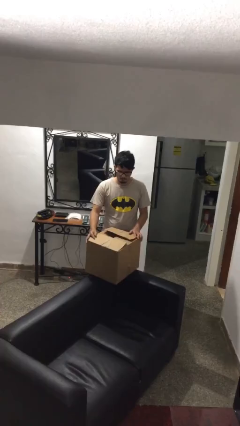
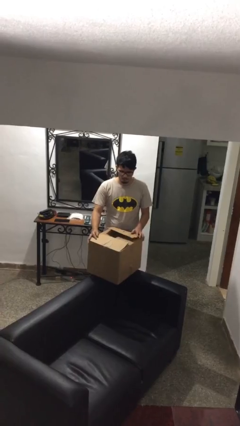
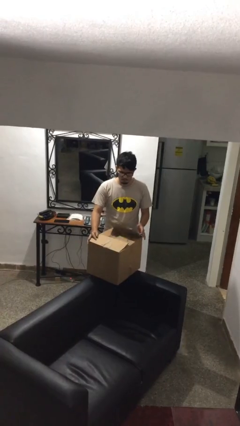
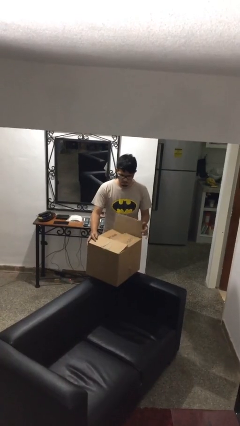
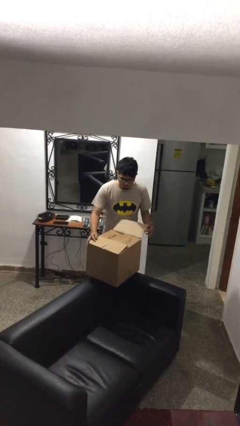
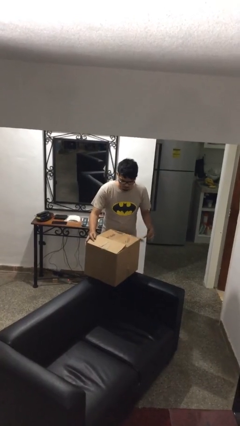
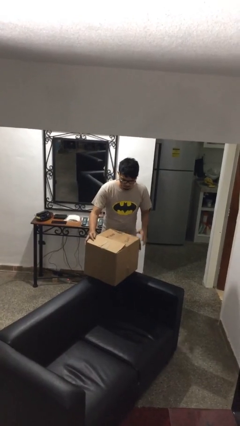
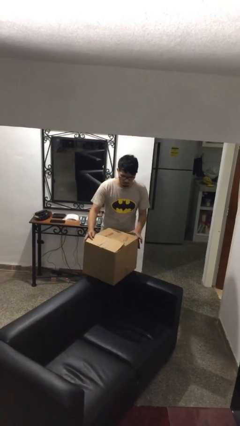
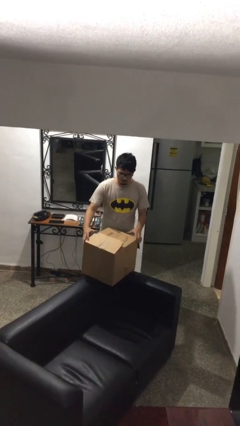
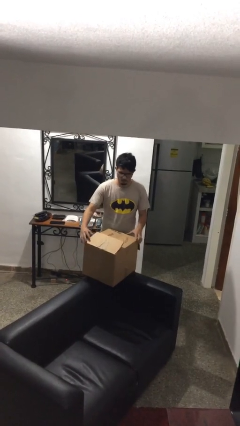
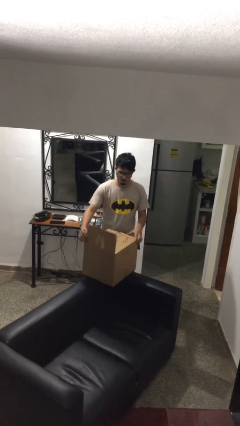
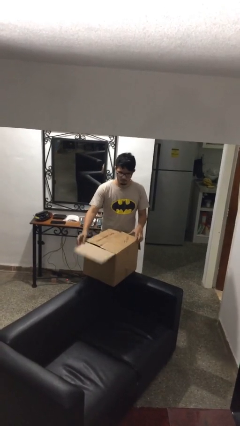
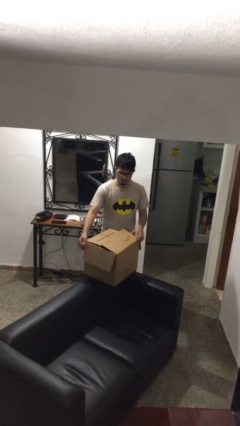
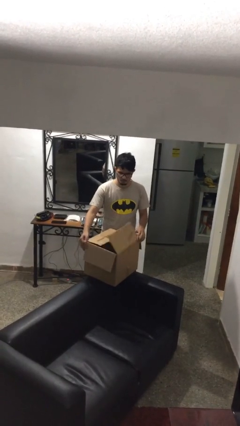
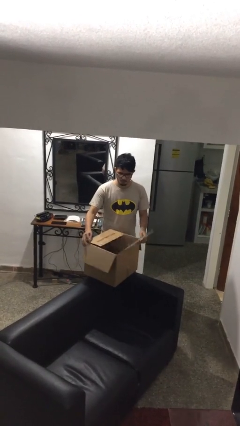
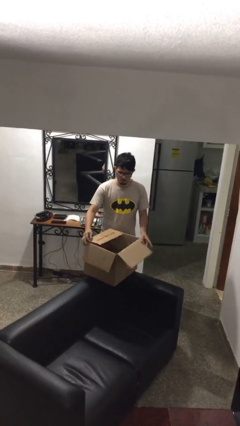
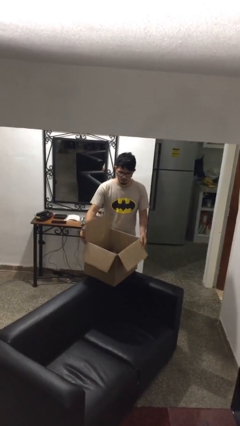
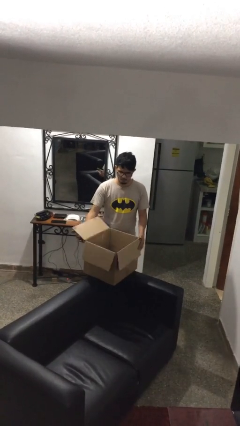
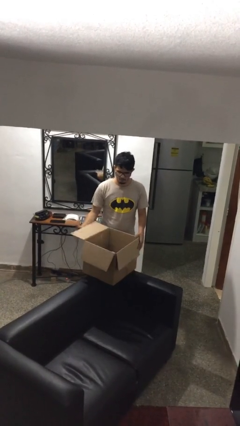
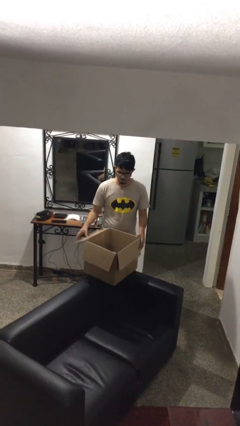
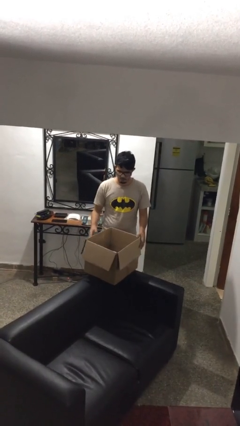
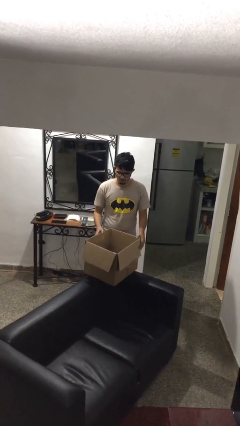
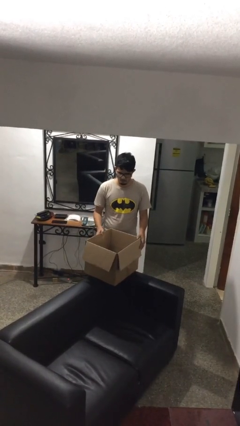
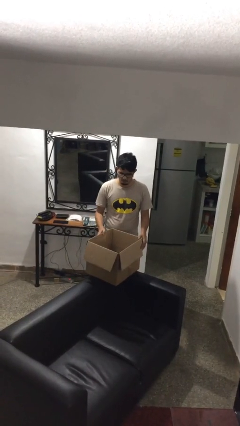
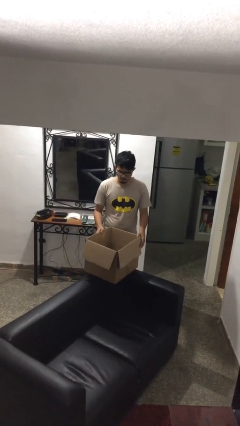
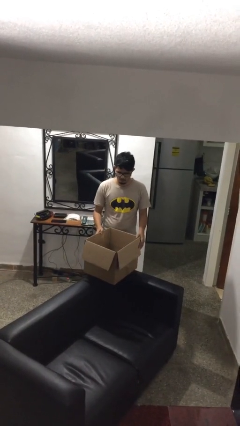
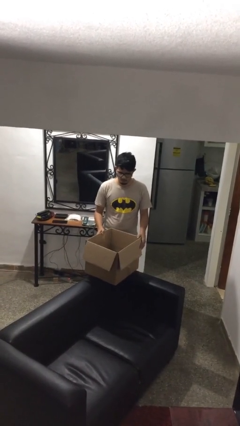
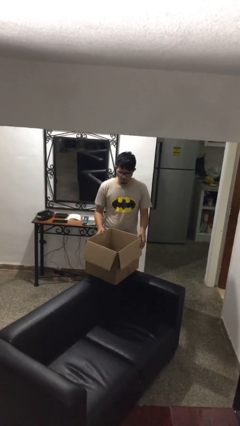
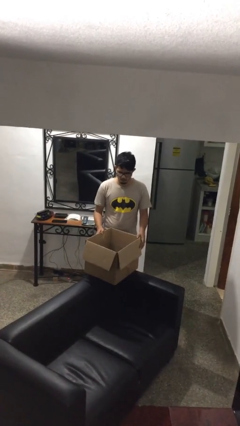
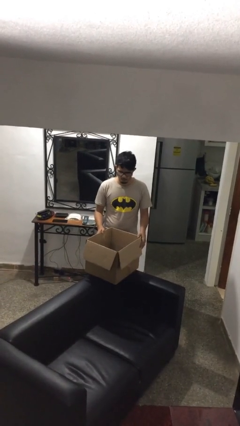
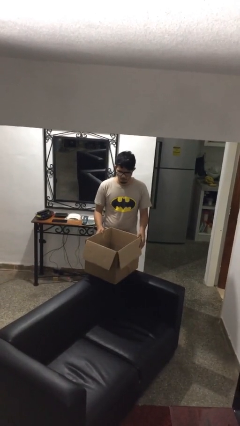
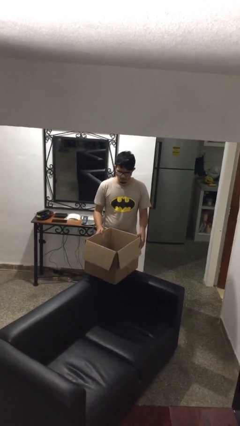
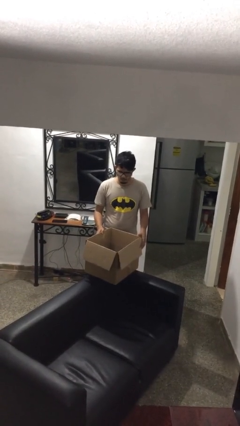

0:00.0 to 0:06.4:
person opens box

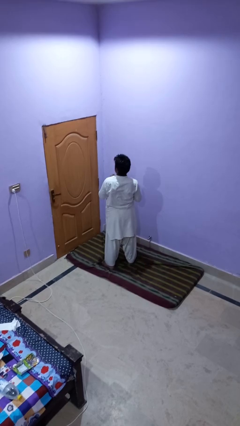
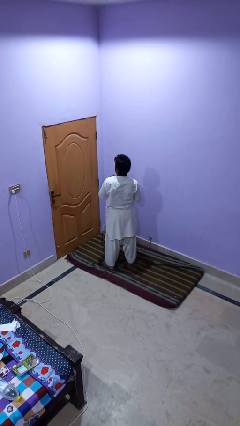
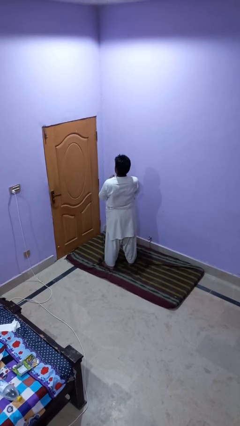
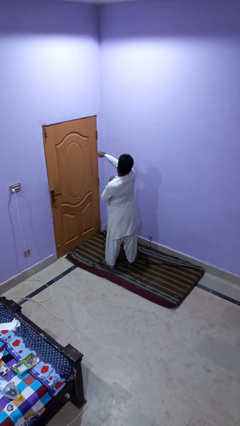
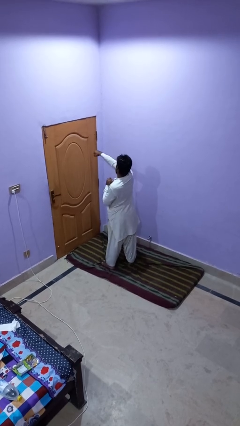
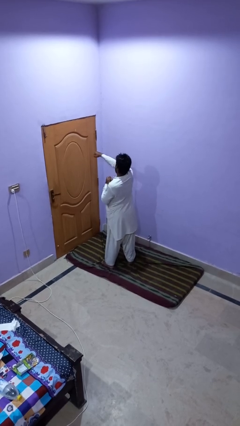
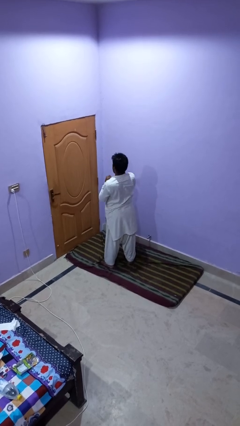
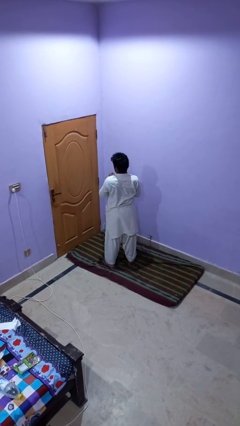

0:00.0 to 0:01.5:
person punches

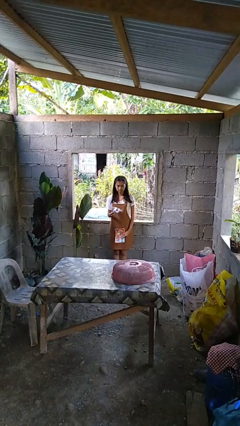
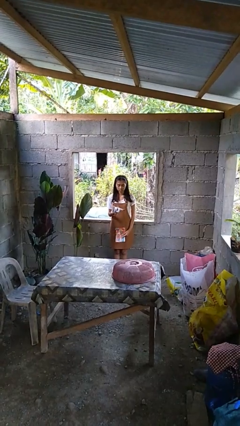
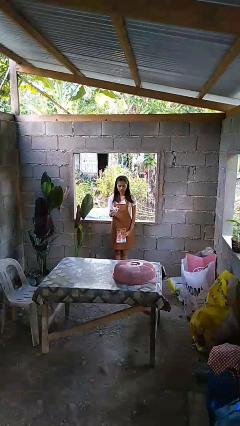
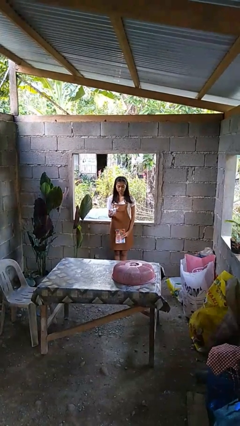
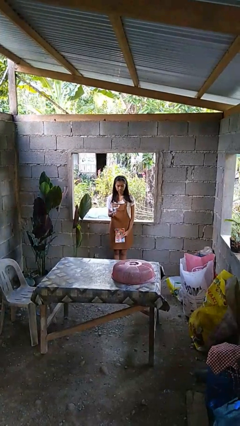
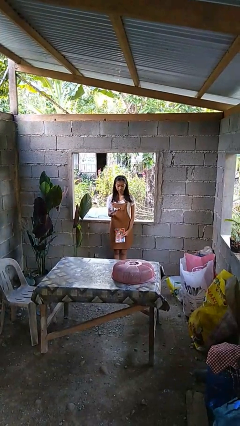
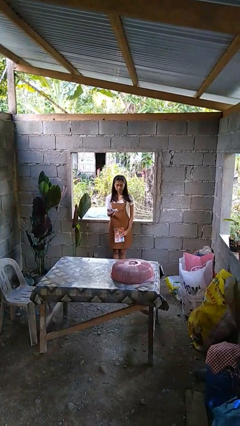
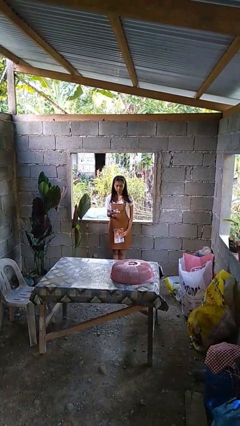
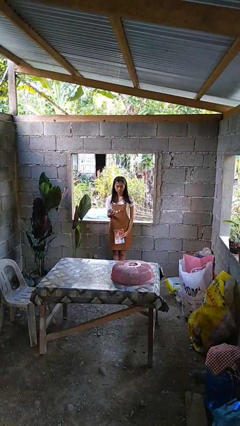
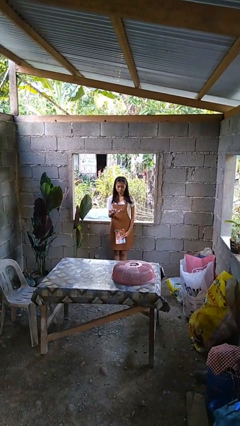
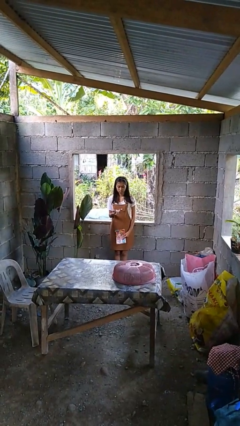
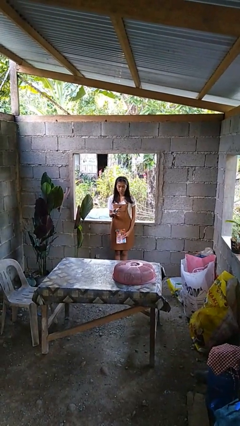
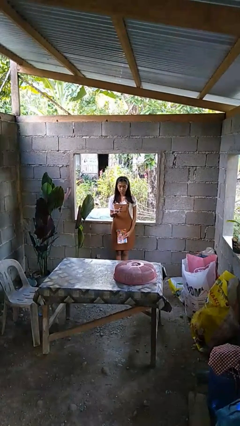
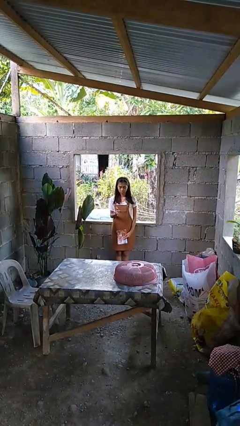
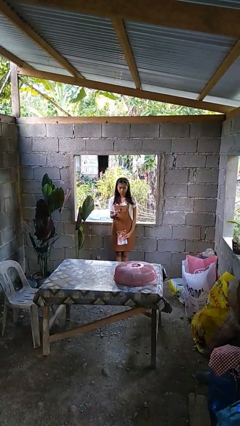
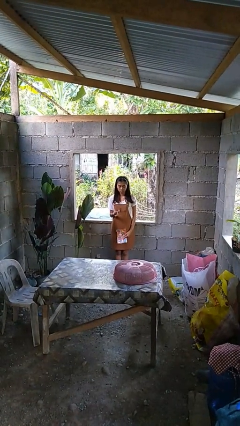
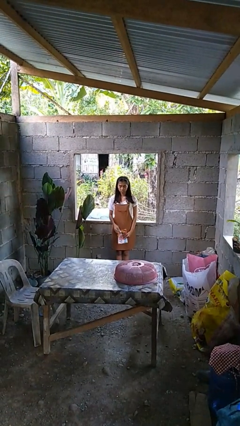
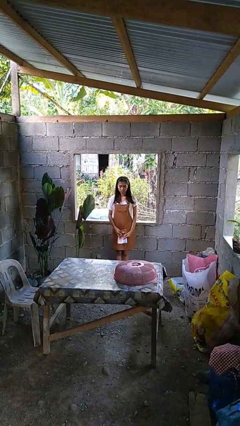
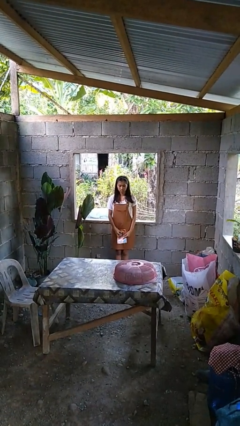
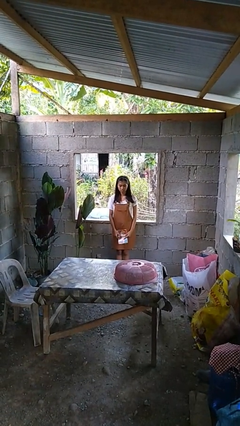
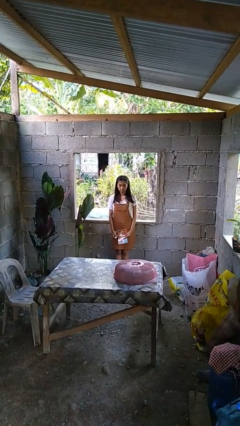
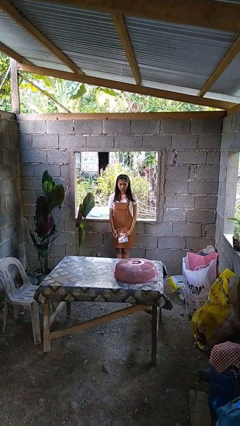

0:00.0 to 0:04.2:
person crumples paper

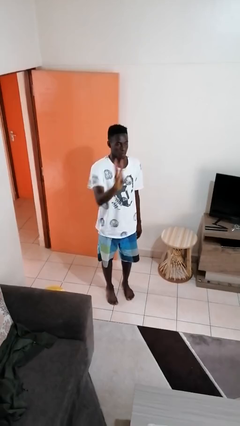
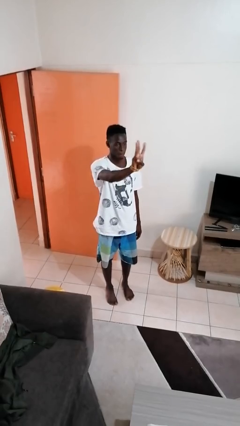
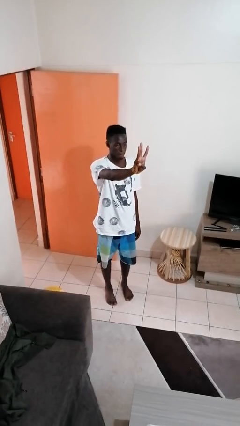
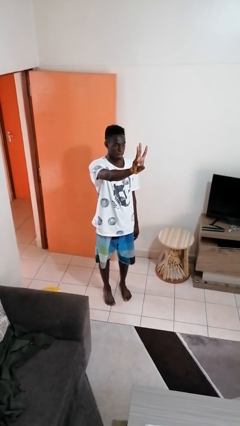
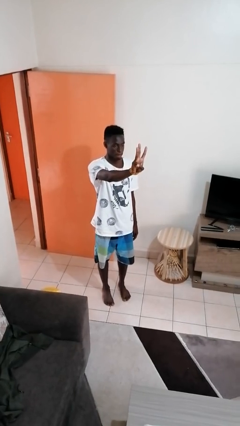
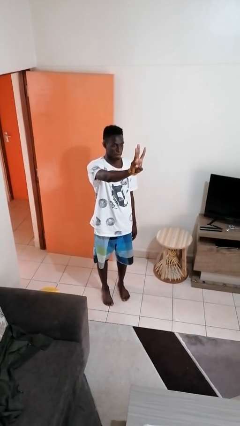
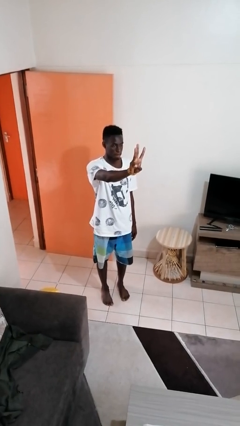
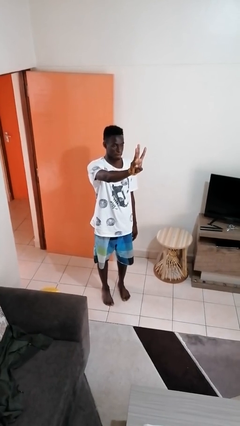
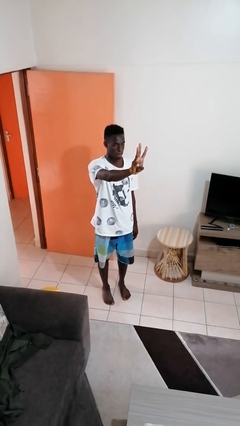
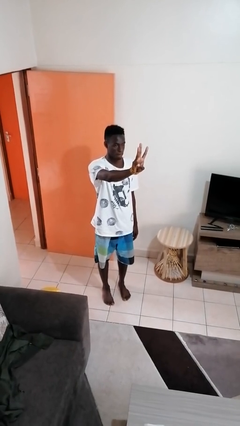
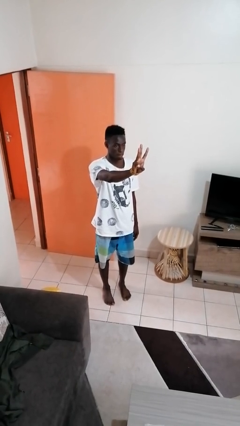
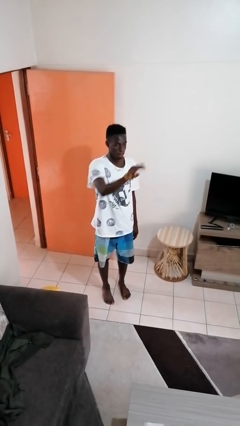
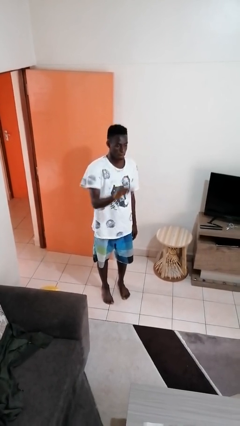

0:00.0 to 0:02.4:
person gestures number three

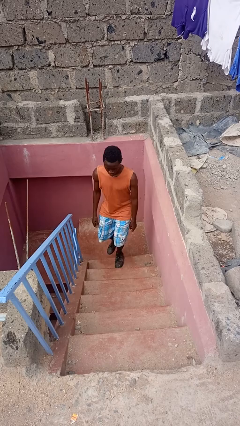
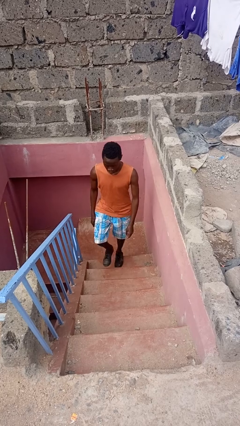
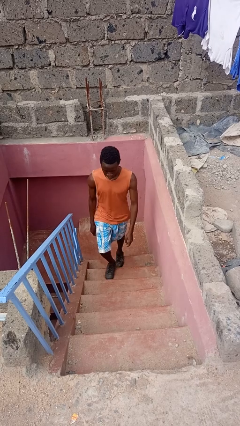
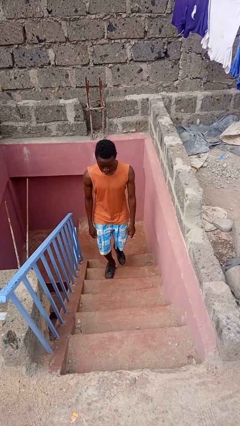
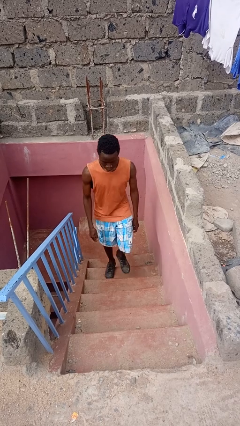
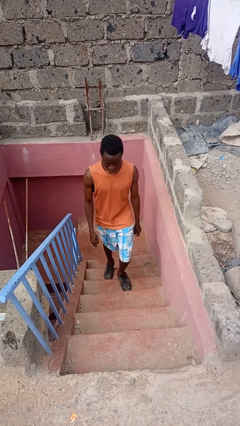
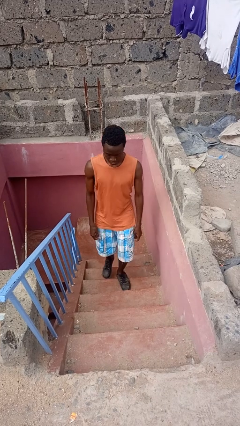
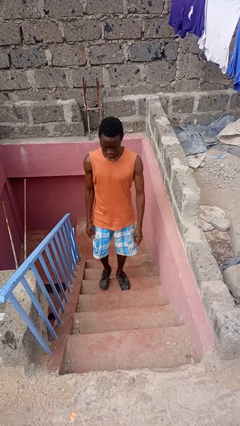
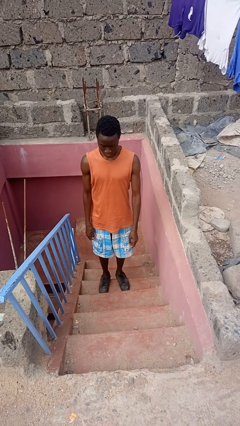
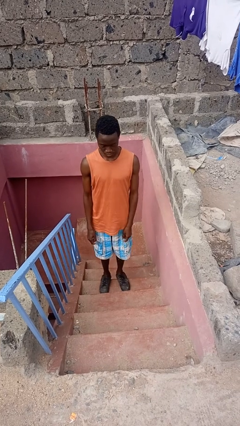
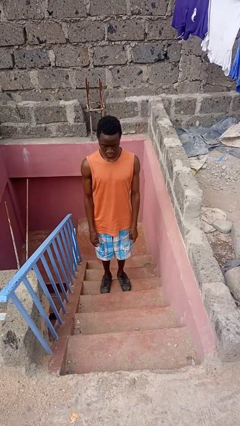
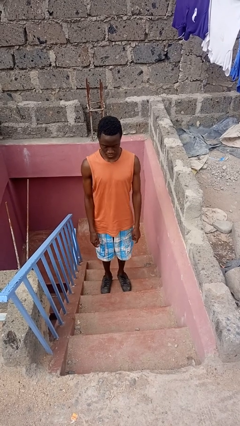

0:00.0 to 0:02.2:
person climbs up stairs

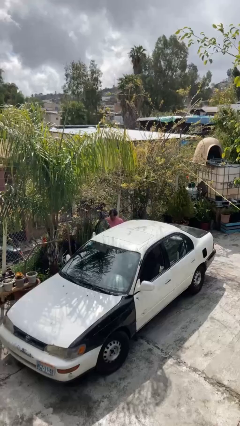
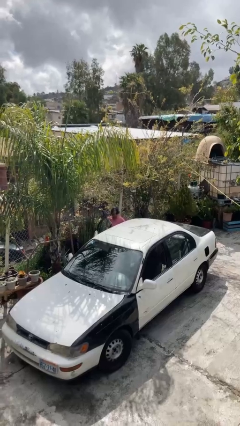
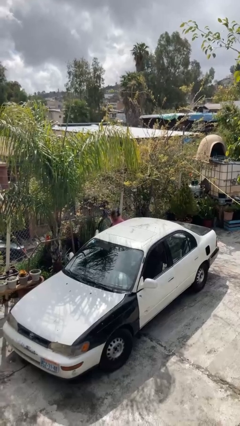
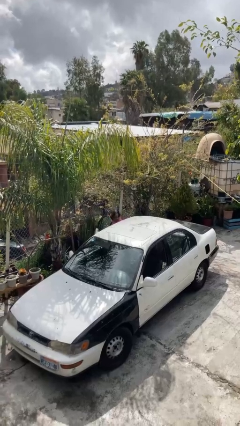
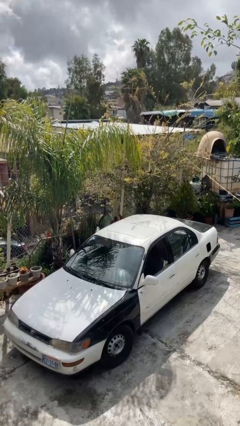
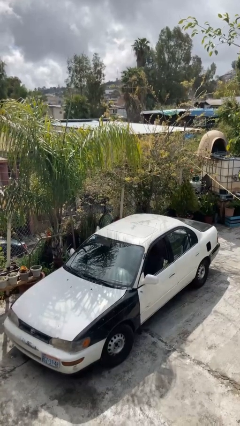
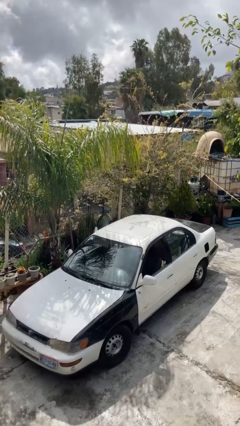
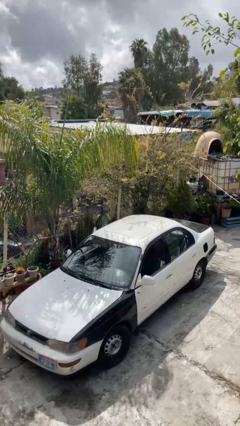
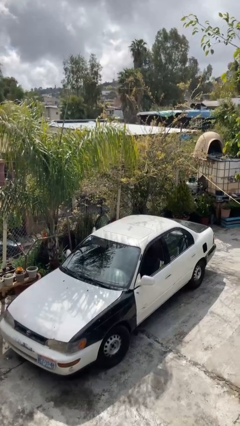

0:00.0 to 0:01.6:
person enters car
